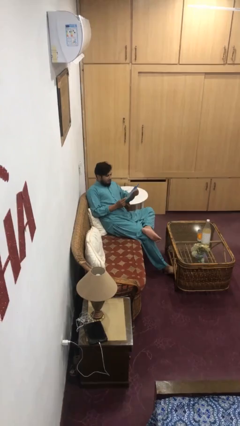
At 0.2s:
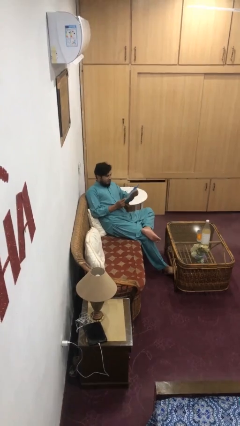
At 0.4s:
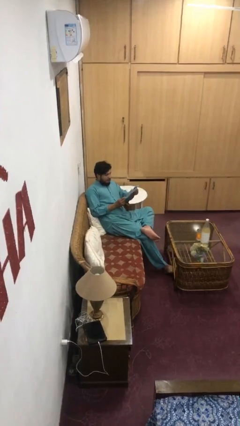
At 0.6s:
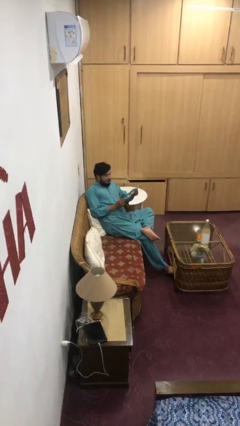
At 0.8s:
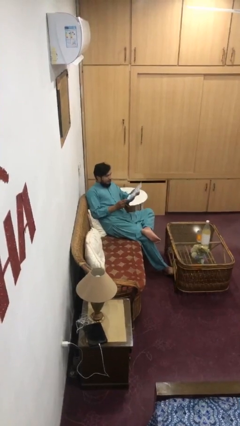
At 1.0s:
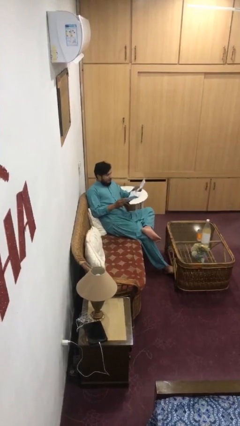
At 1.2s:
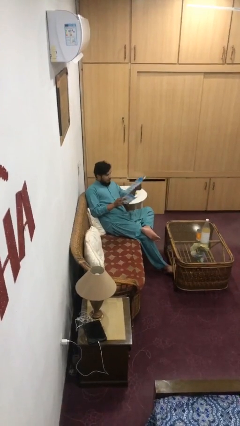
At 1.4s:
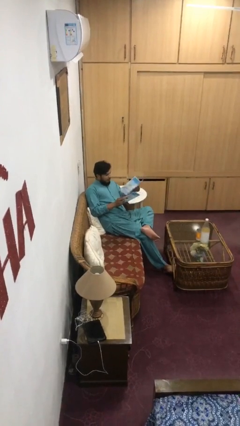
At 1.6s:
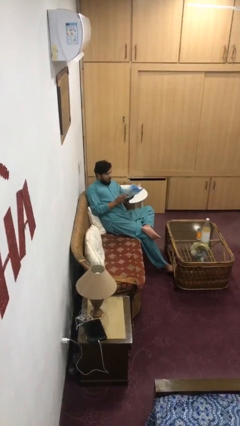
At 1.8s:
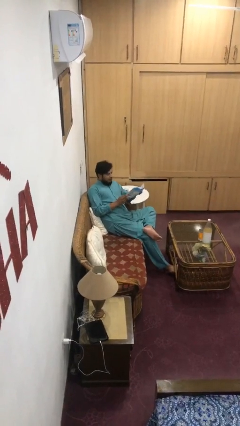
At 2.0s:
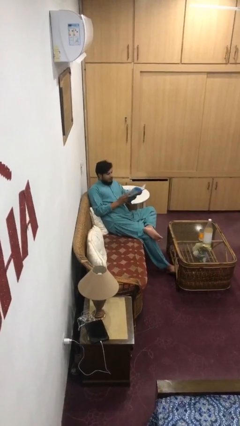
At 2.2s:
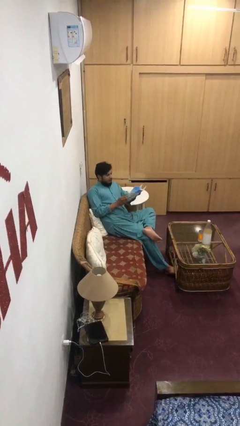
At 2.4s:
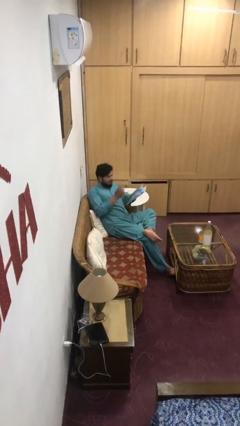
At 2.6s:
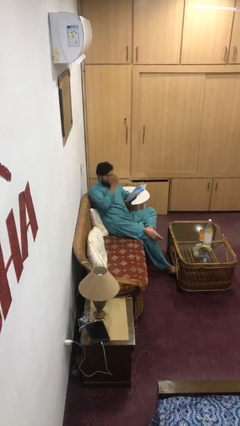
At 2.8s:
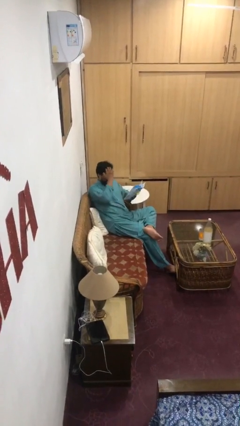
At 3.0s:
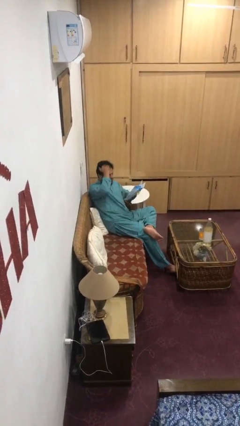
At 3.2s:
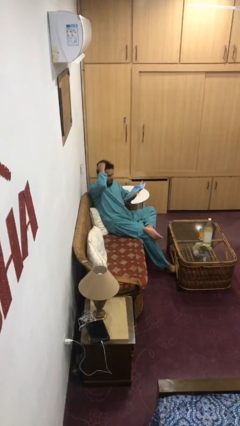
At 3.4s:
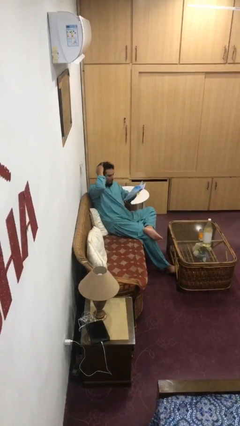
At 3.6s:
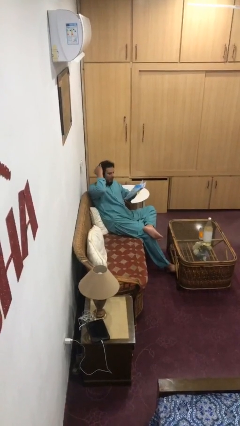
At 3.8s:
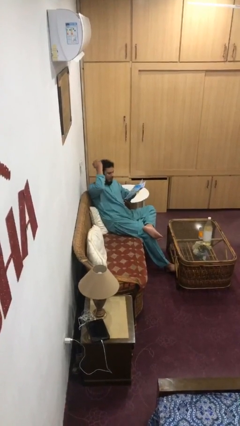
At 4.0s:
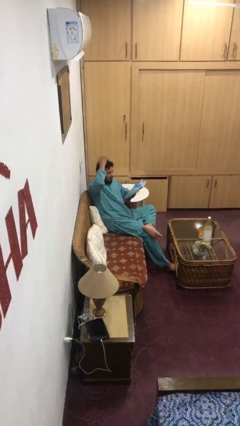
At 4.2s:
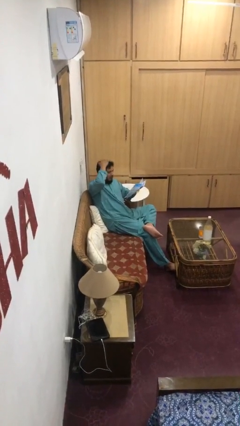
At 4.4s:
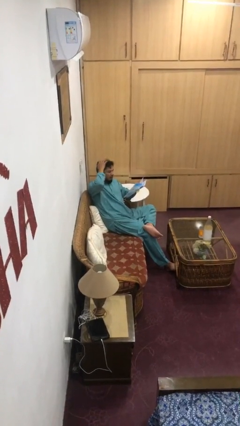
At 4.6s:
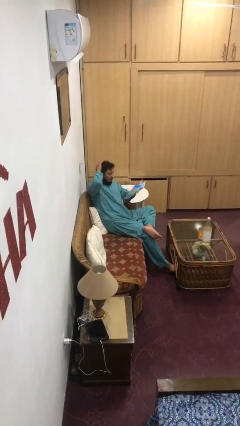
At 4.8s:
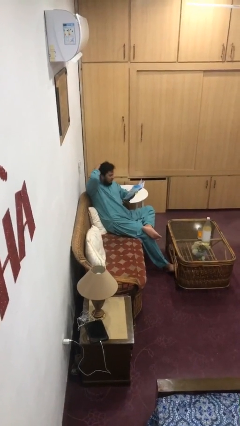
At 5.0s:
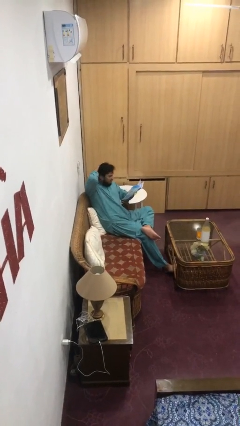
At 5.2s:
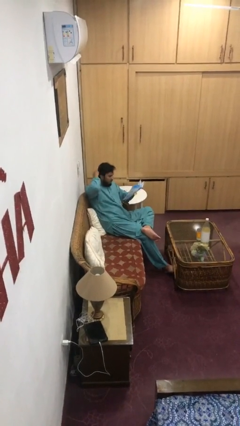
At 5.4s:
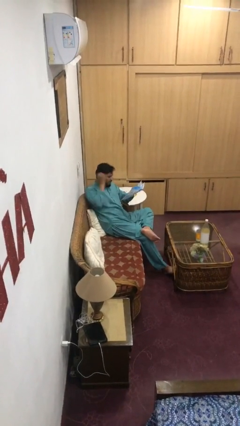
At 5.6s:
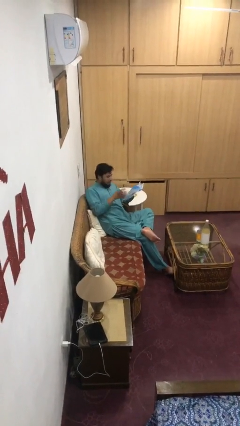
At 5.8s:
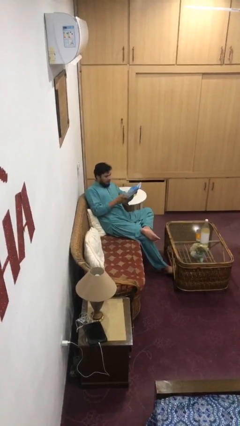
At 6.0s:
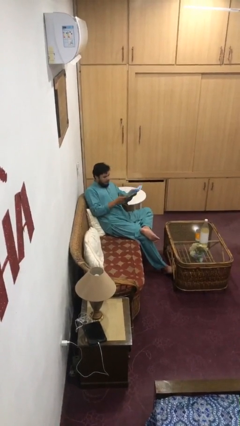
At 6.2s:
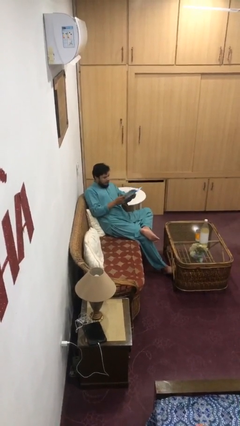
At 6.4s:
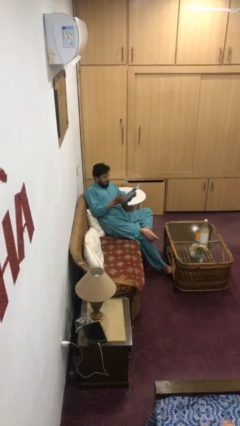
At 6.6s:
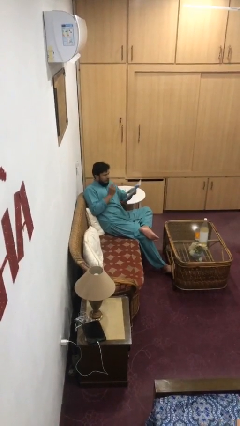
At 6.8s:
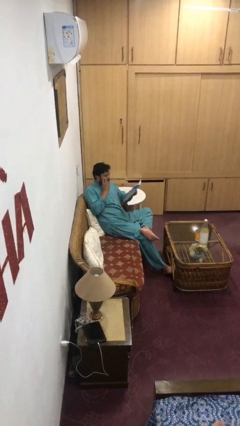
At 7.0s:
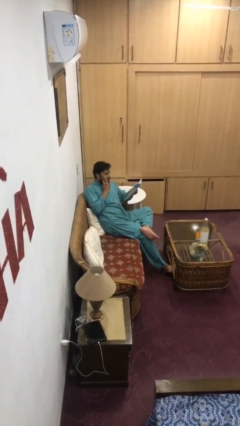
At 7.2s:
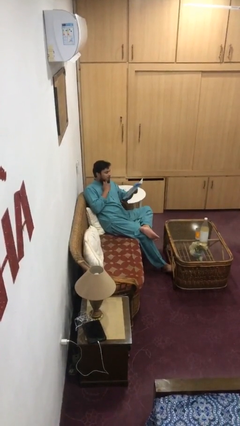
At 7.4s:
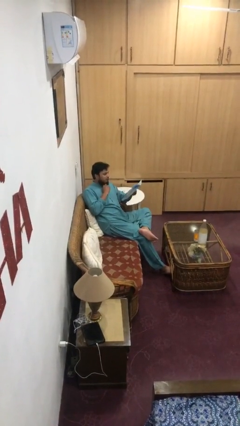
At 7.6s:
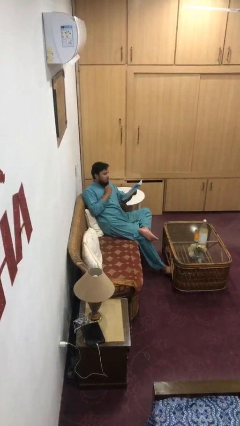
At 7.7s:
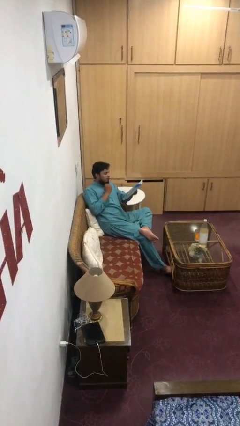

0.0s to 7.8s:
person reads document

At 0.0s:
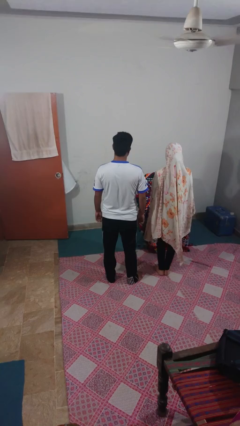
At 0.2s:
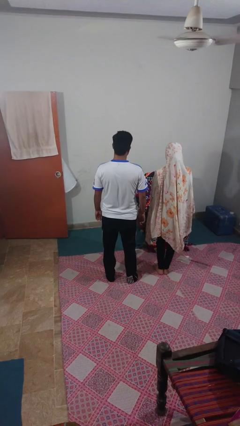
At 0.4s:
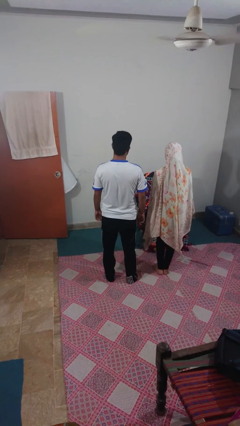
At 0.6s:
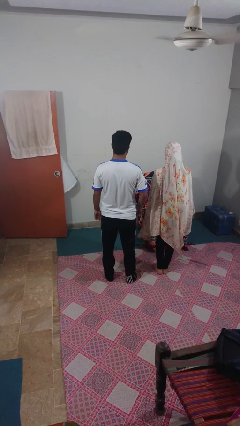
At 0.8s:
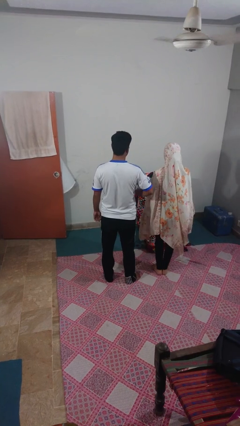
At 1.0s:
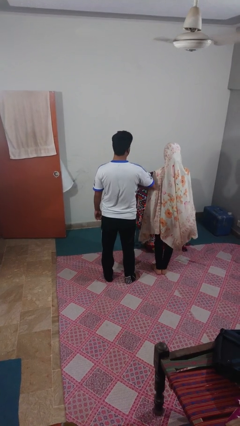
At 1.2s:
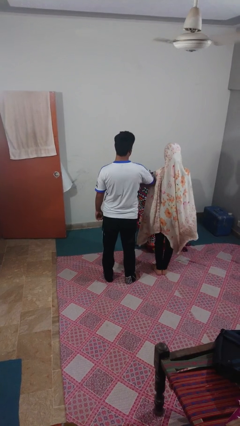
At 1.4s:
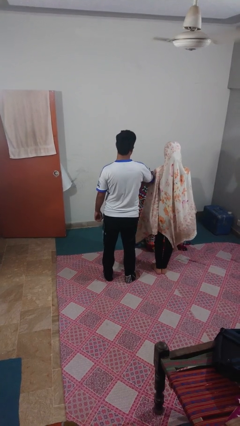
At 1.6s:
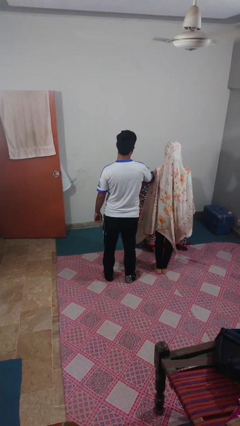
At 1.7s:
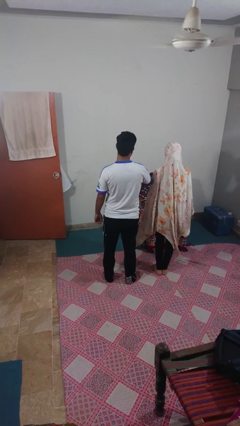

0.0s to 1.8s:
person nudges person with elbow

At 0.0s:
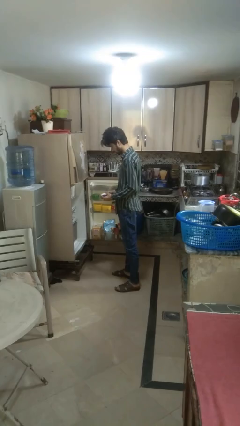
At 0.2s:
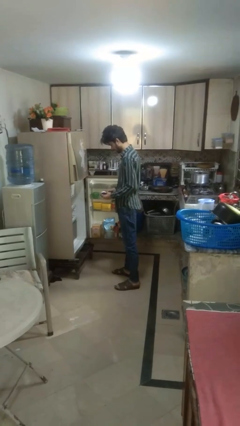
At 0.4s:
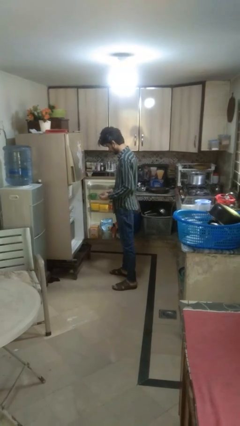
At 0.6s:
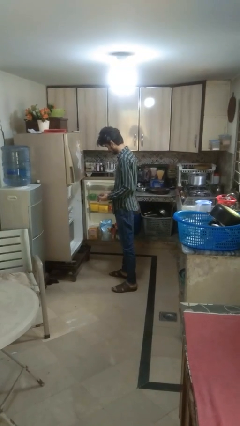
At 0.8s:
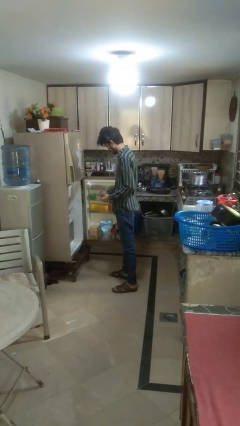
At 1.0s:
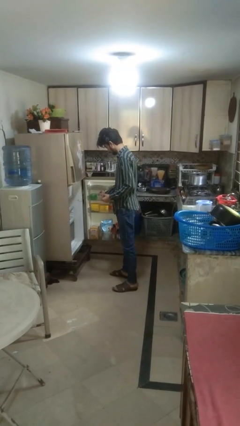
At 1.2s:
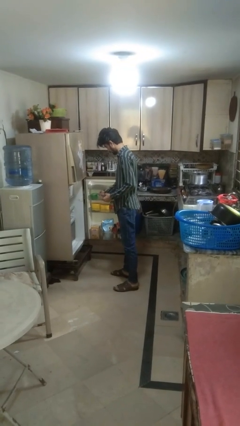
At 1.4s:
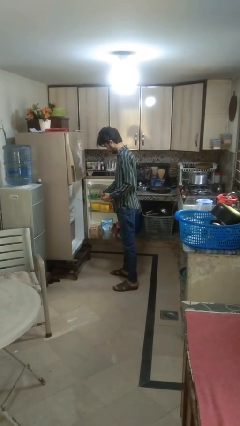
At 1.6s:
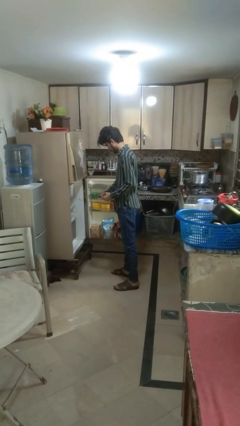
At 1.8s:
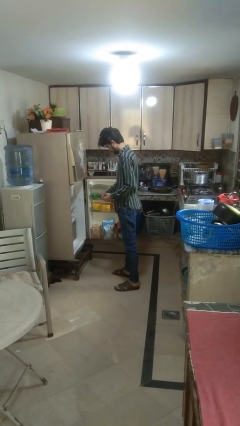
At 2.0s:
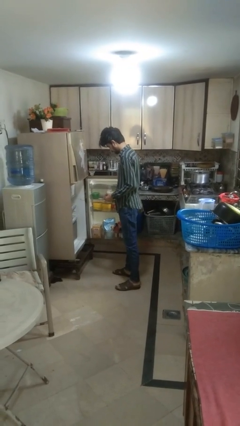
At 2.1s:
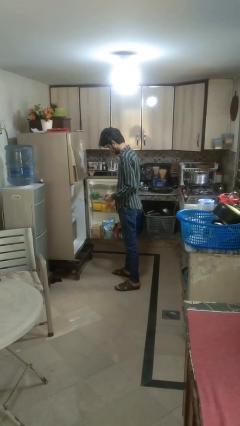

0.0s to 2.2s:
person puts object into refrigerator

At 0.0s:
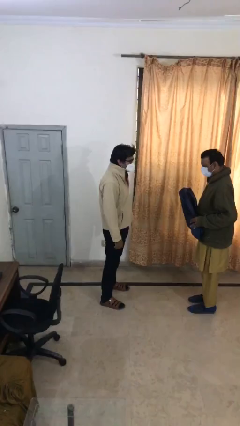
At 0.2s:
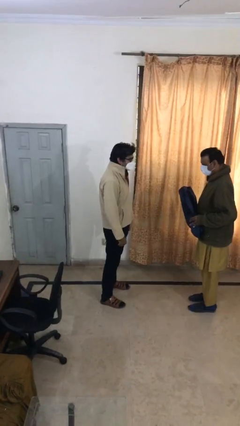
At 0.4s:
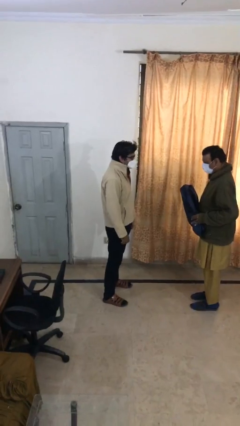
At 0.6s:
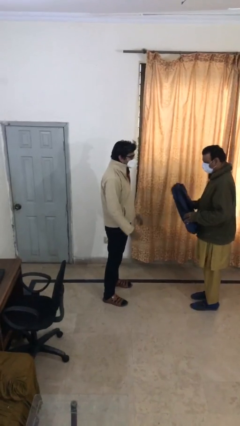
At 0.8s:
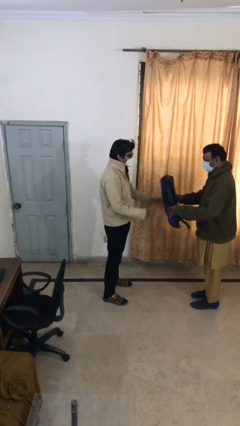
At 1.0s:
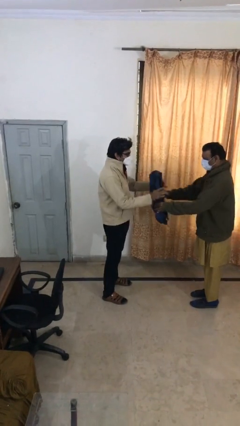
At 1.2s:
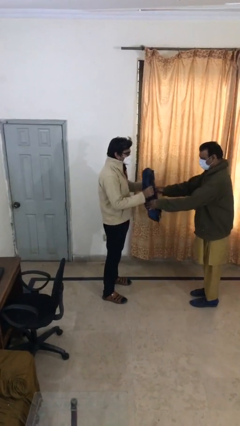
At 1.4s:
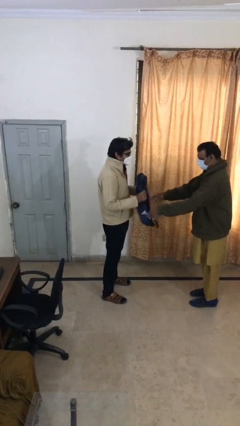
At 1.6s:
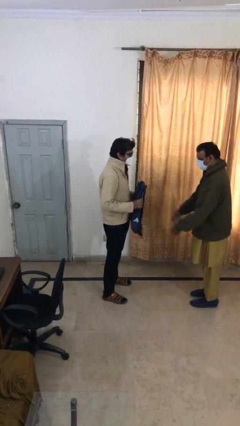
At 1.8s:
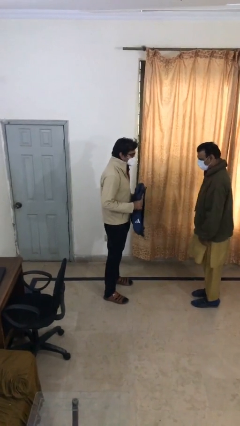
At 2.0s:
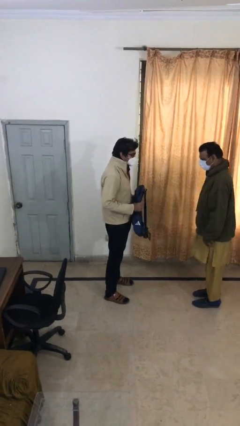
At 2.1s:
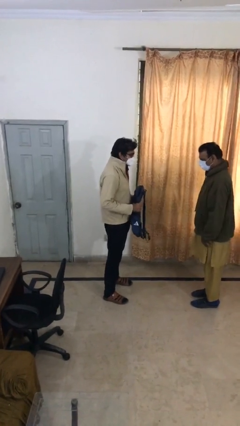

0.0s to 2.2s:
person transfers object to person

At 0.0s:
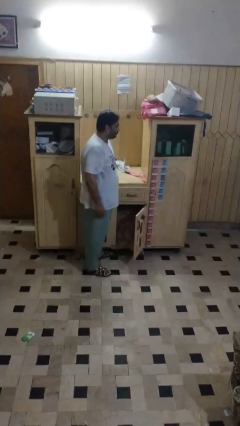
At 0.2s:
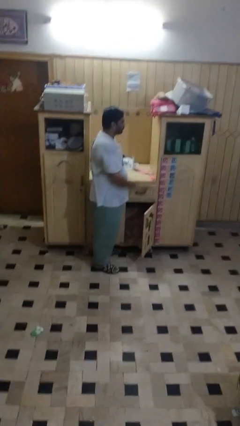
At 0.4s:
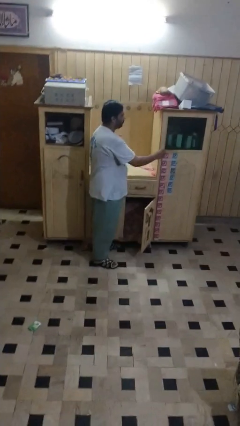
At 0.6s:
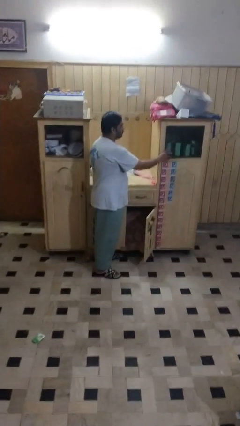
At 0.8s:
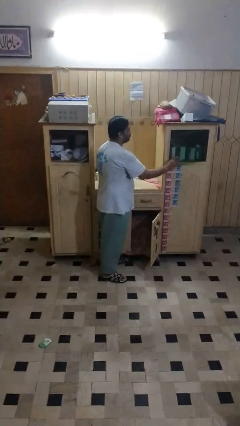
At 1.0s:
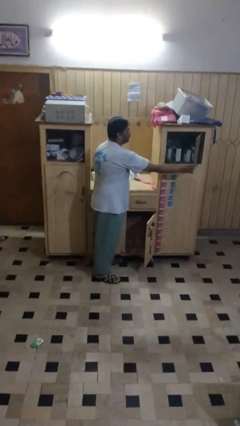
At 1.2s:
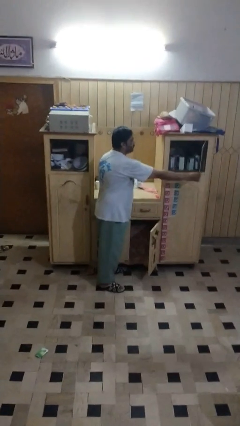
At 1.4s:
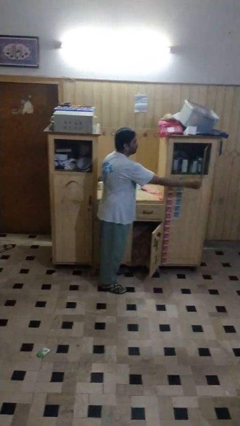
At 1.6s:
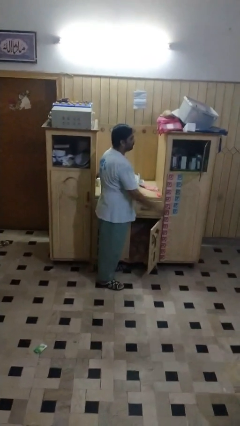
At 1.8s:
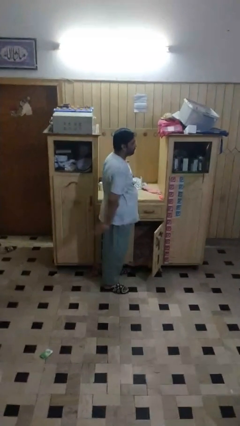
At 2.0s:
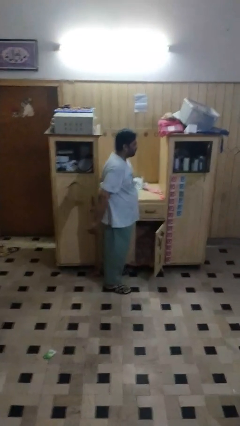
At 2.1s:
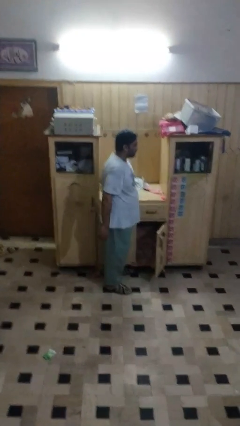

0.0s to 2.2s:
person closes cabinet

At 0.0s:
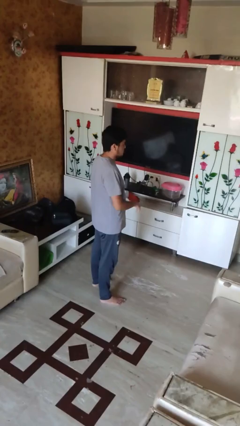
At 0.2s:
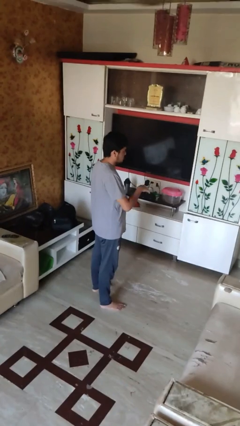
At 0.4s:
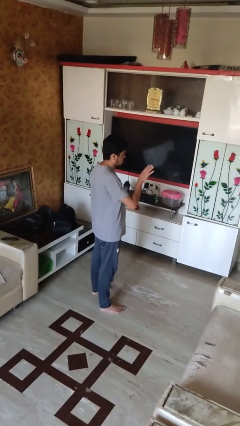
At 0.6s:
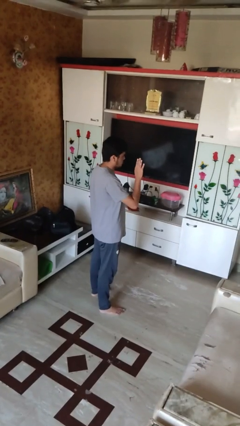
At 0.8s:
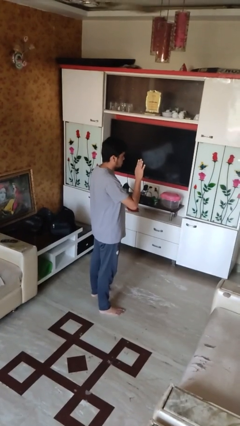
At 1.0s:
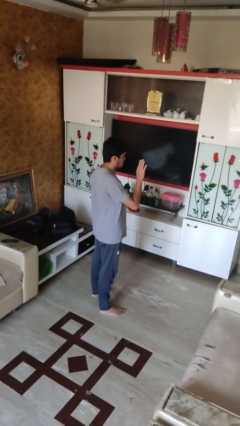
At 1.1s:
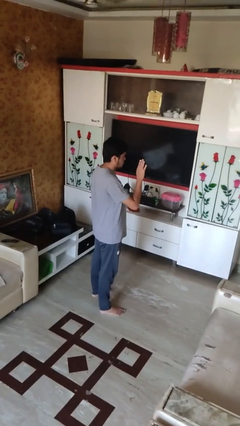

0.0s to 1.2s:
person gestures swipe up

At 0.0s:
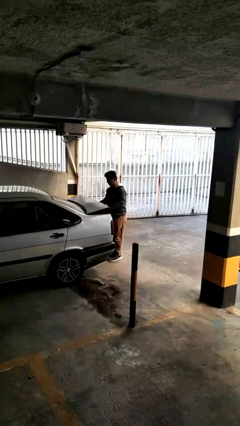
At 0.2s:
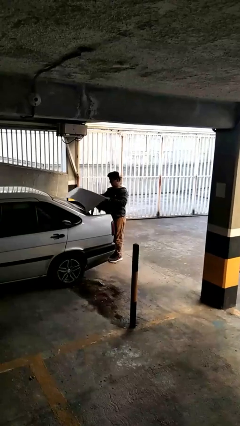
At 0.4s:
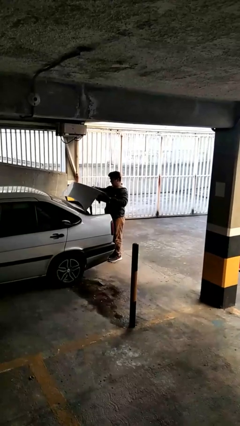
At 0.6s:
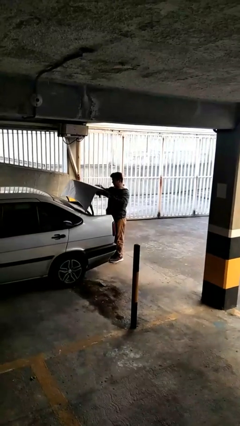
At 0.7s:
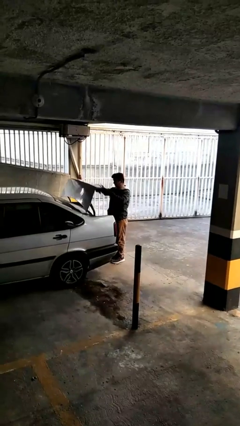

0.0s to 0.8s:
person opens car trunk
